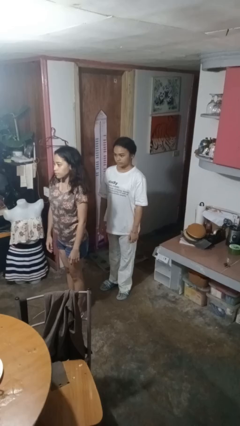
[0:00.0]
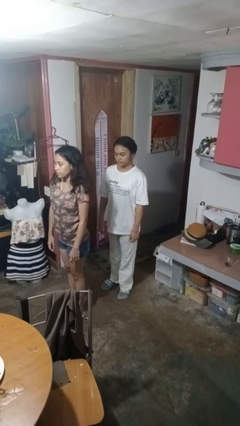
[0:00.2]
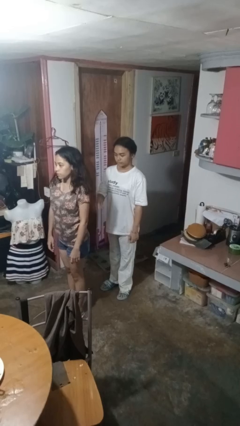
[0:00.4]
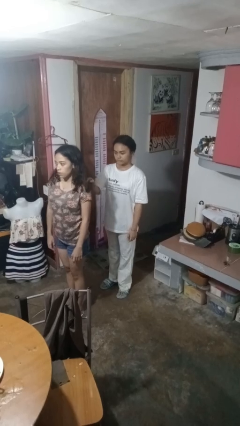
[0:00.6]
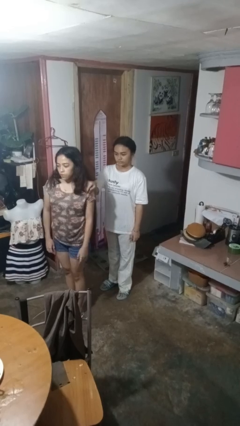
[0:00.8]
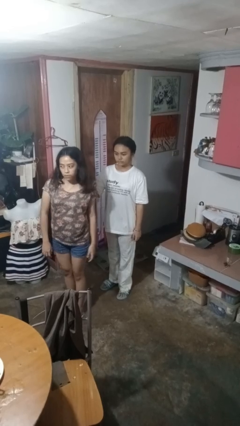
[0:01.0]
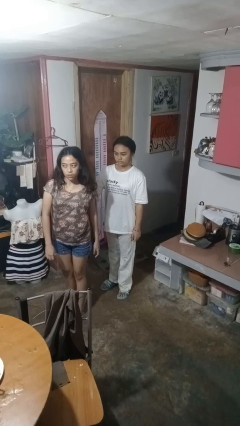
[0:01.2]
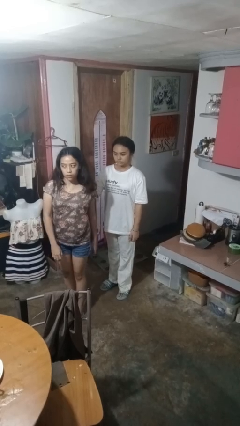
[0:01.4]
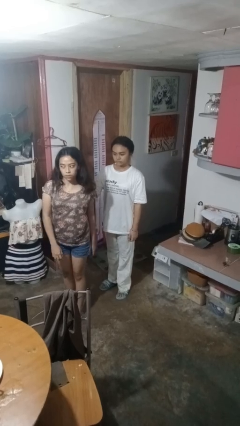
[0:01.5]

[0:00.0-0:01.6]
person grabs person by shoulder

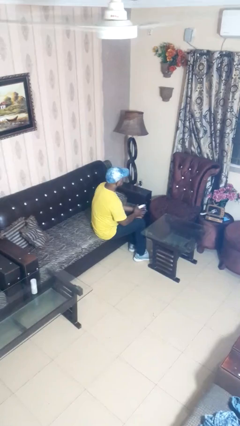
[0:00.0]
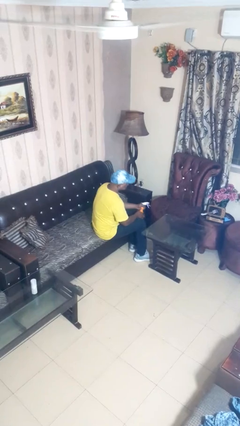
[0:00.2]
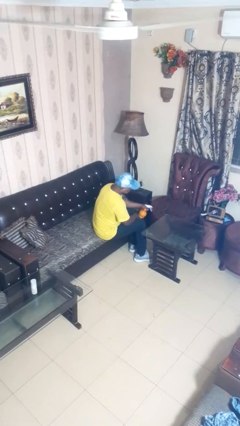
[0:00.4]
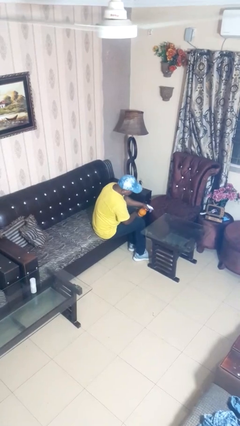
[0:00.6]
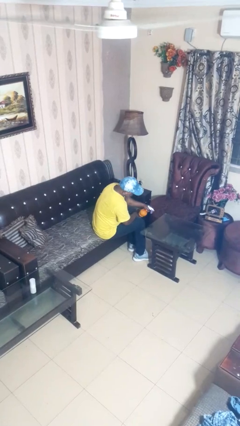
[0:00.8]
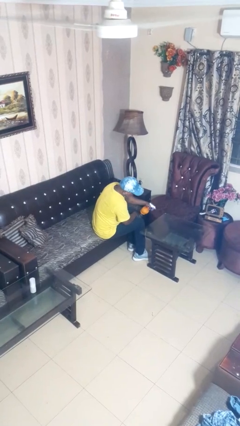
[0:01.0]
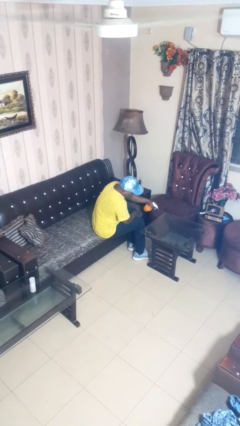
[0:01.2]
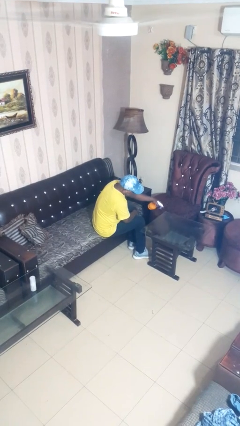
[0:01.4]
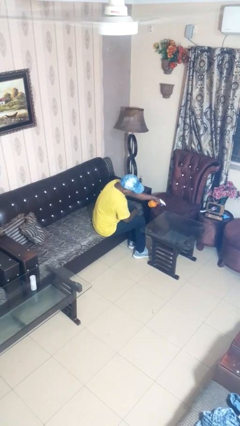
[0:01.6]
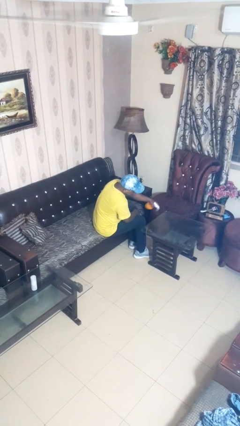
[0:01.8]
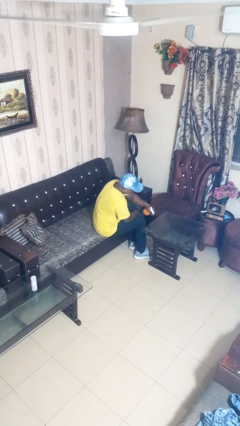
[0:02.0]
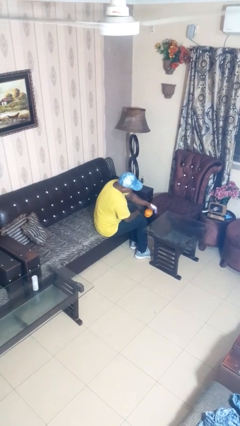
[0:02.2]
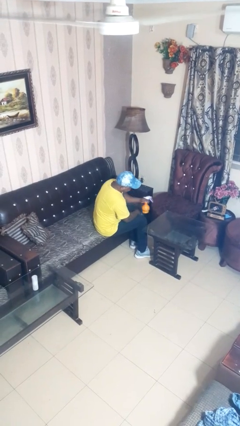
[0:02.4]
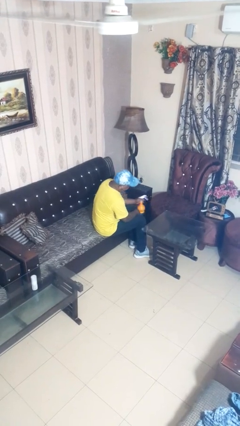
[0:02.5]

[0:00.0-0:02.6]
person sprays from bottle

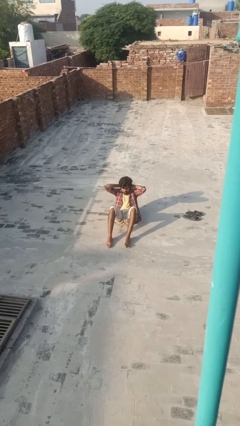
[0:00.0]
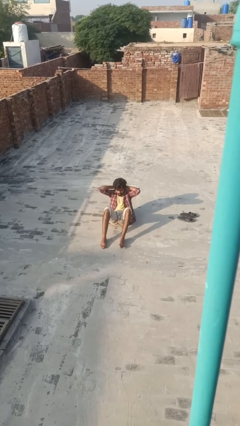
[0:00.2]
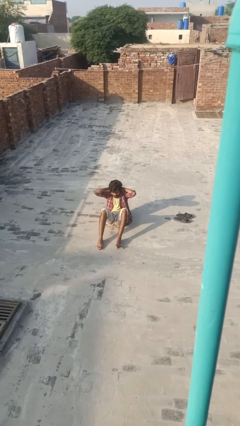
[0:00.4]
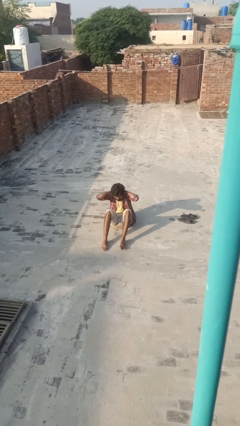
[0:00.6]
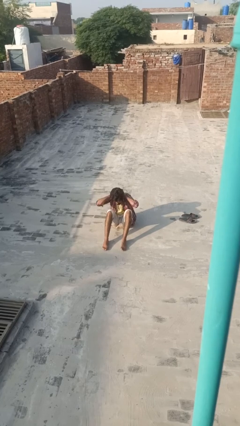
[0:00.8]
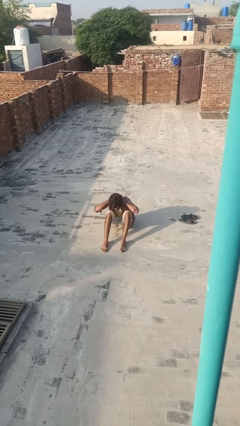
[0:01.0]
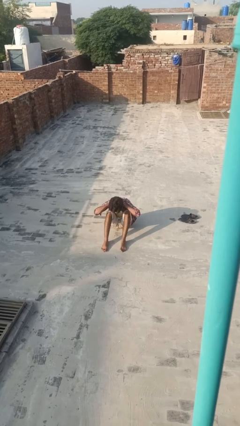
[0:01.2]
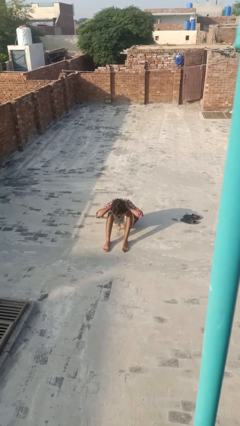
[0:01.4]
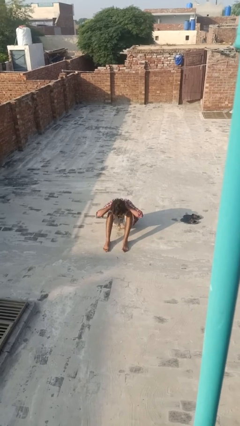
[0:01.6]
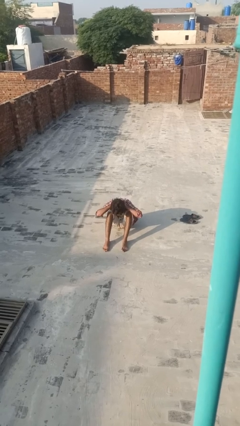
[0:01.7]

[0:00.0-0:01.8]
person exercises with situp

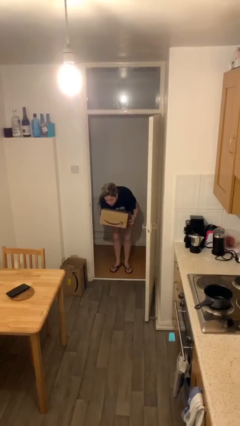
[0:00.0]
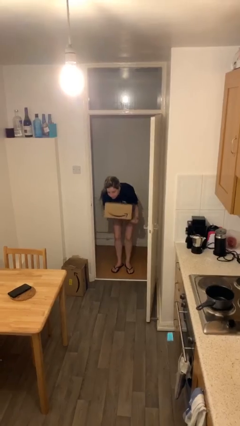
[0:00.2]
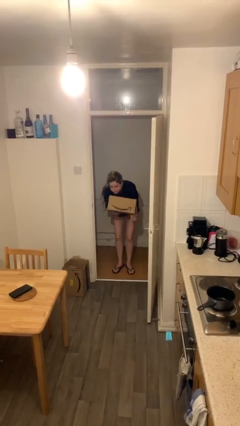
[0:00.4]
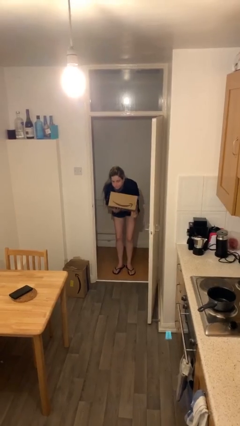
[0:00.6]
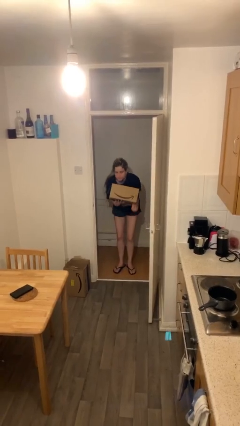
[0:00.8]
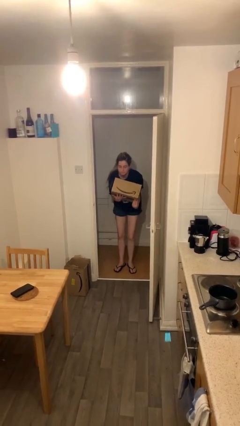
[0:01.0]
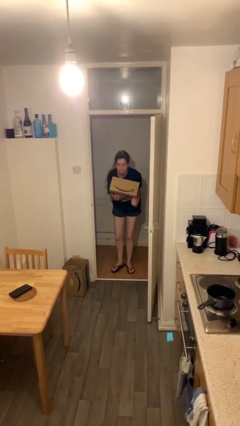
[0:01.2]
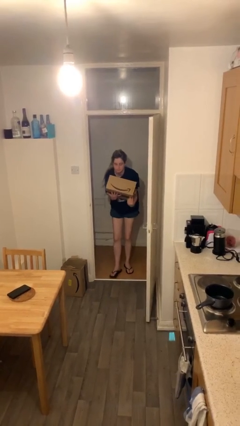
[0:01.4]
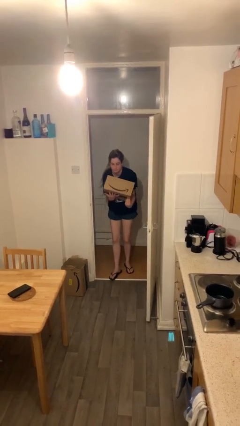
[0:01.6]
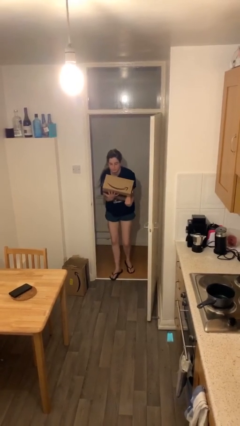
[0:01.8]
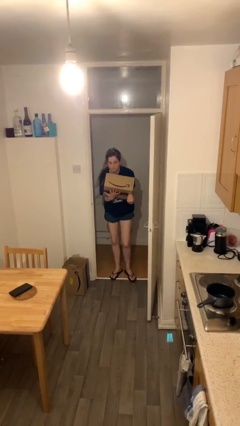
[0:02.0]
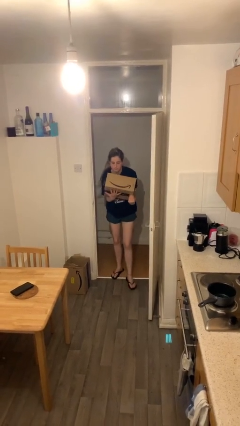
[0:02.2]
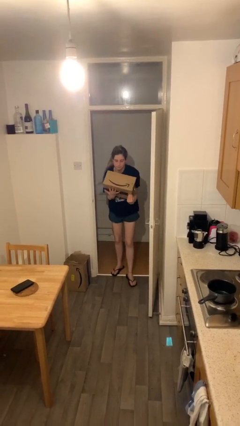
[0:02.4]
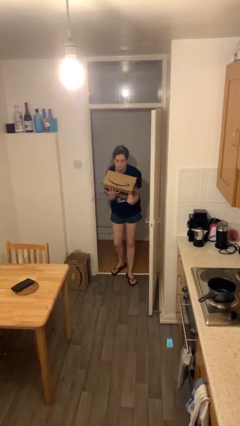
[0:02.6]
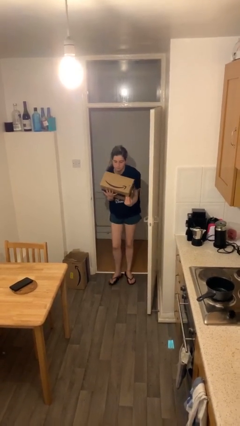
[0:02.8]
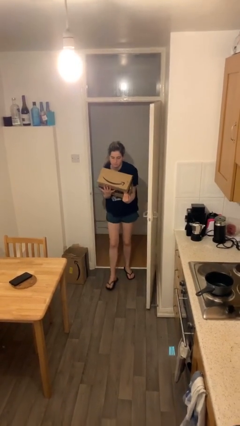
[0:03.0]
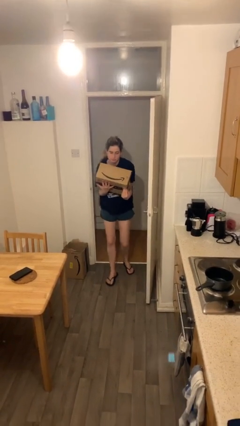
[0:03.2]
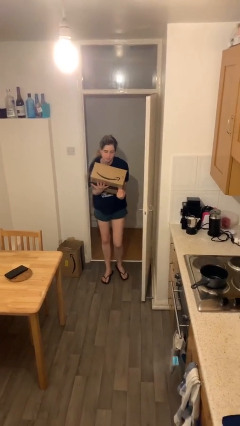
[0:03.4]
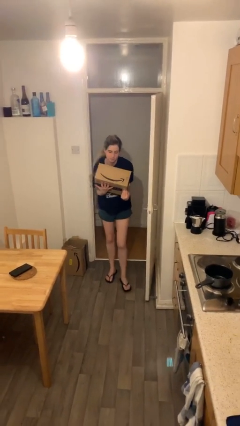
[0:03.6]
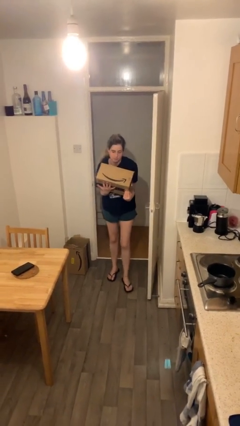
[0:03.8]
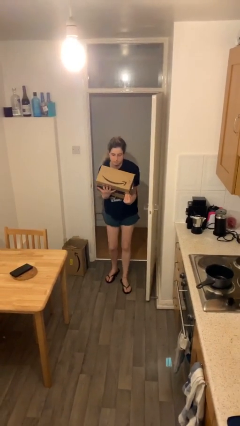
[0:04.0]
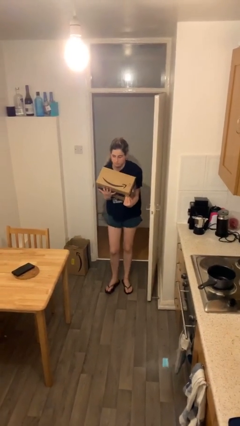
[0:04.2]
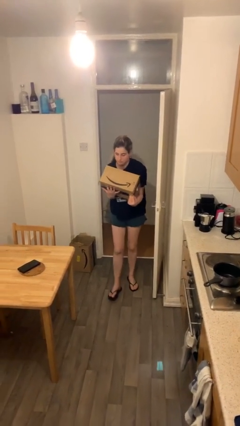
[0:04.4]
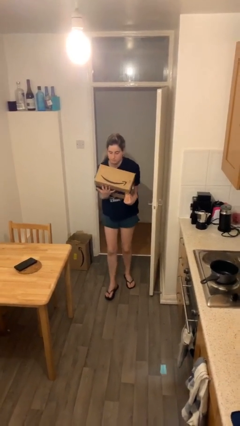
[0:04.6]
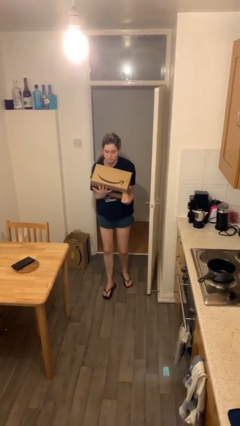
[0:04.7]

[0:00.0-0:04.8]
person carries heavy object

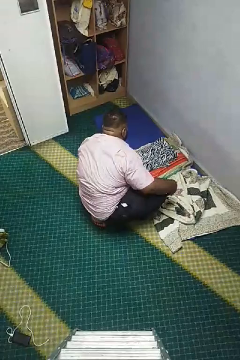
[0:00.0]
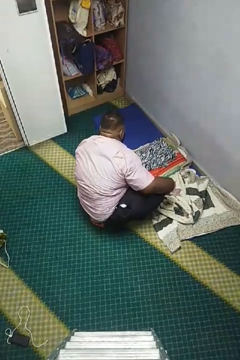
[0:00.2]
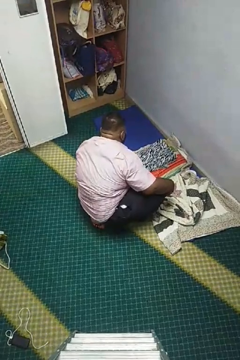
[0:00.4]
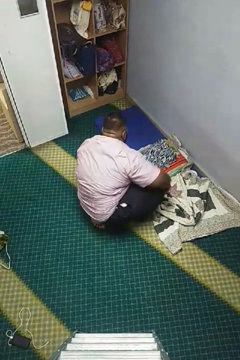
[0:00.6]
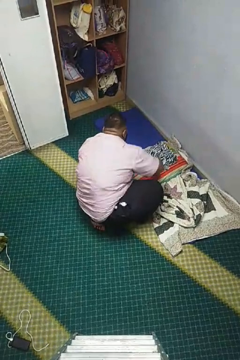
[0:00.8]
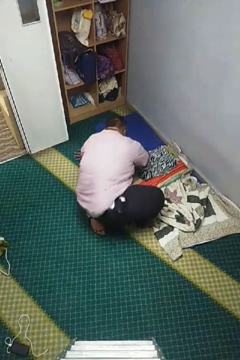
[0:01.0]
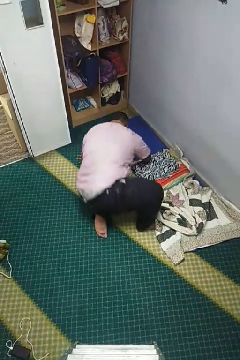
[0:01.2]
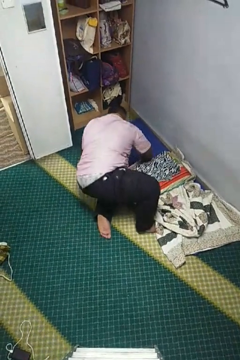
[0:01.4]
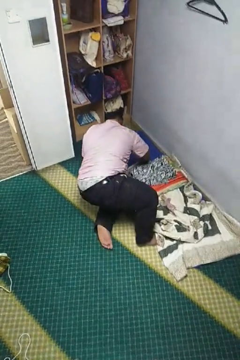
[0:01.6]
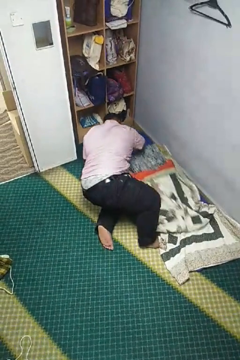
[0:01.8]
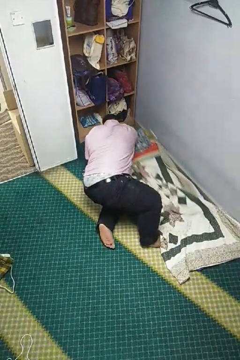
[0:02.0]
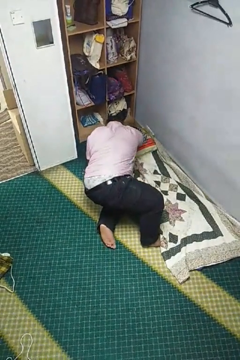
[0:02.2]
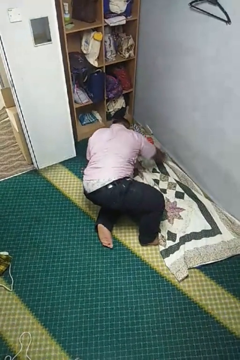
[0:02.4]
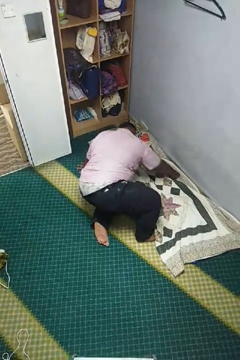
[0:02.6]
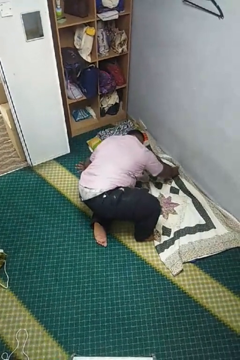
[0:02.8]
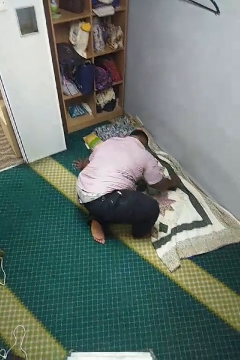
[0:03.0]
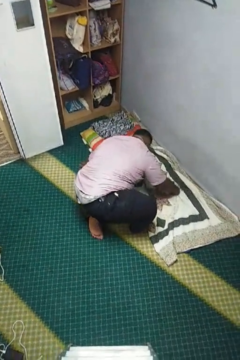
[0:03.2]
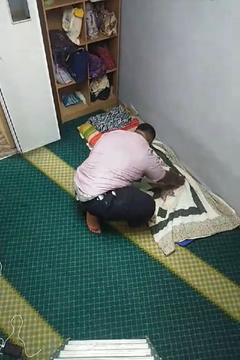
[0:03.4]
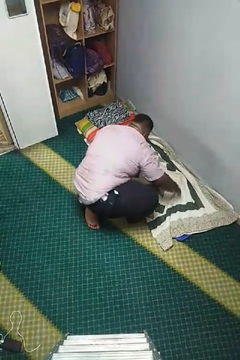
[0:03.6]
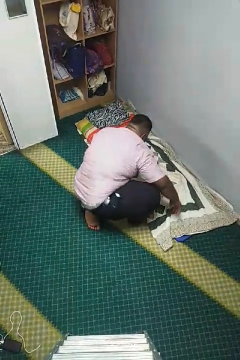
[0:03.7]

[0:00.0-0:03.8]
person makes bed

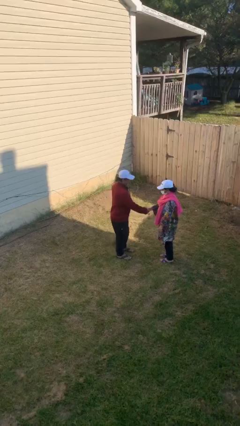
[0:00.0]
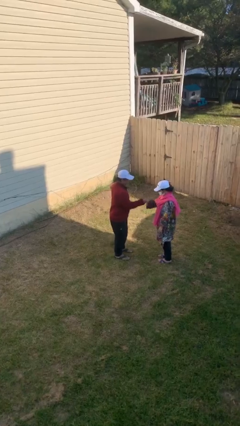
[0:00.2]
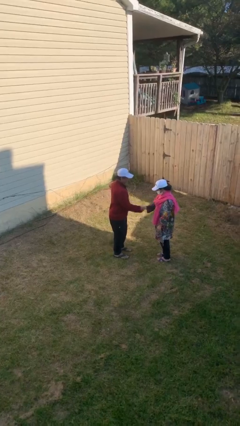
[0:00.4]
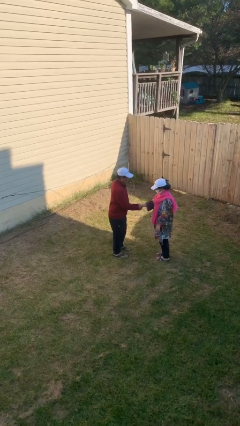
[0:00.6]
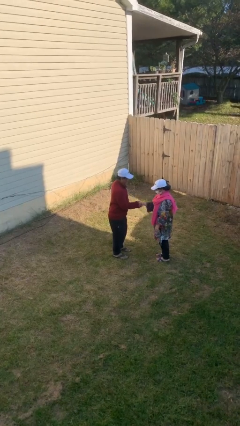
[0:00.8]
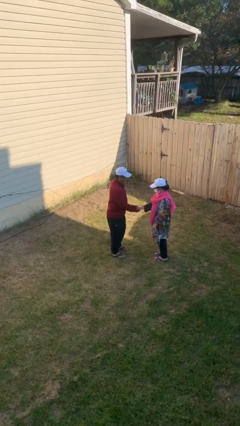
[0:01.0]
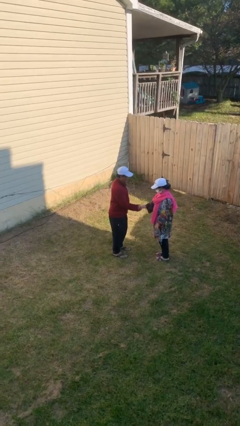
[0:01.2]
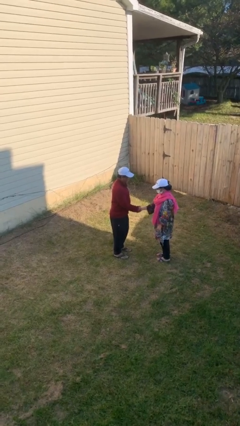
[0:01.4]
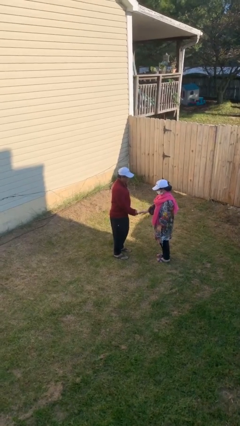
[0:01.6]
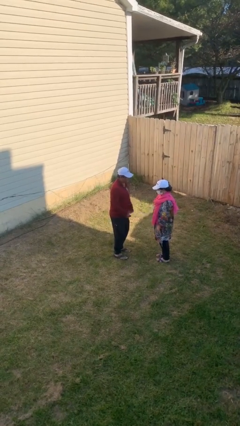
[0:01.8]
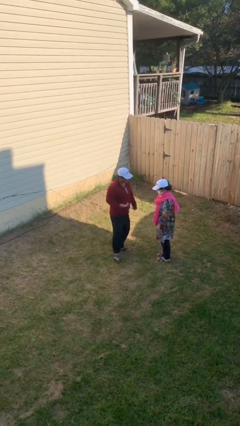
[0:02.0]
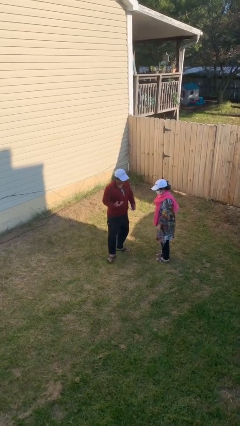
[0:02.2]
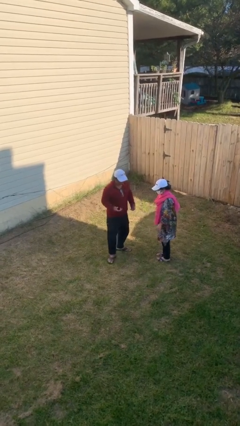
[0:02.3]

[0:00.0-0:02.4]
person shakes hand

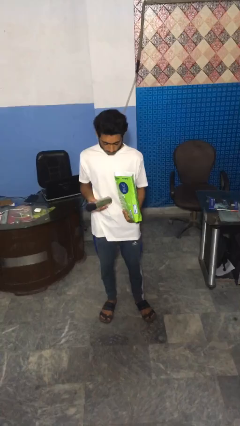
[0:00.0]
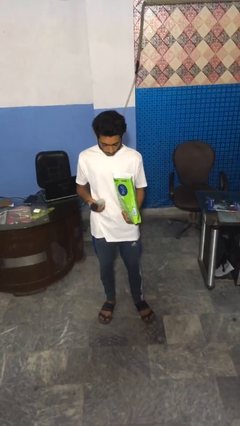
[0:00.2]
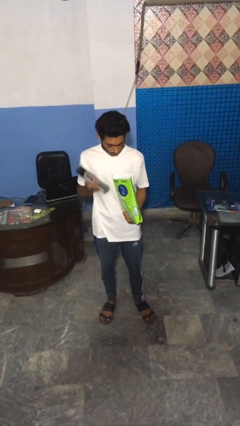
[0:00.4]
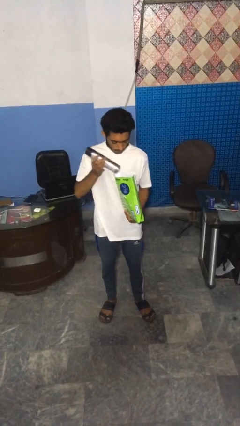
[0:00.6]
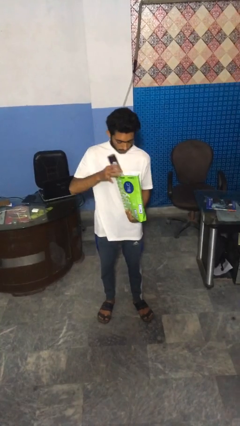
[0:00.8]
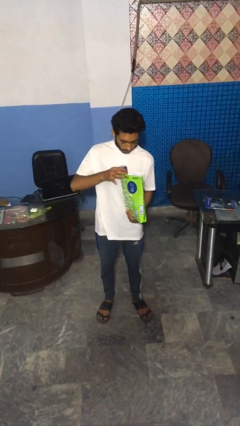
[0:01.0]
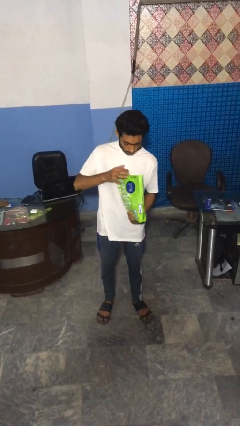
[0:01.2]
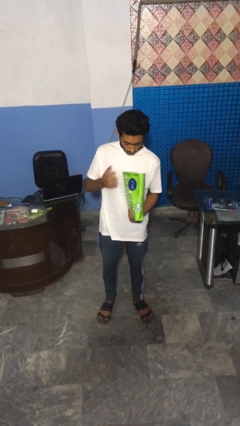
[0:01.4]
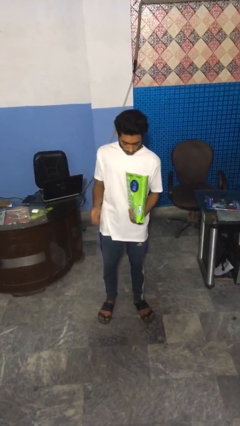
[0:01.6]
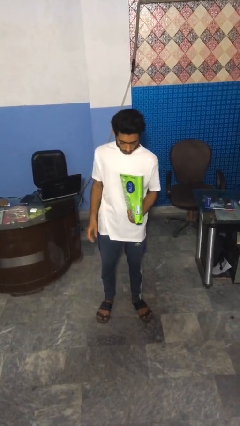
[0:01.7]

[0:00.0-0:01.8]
person puts object into bag
